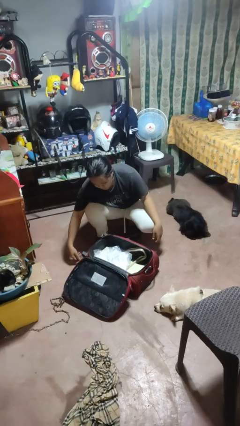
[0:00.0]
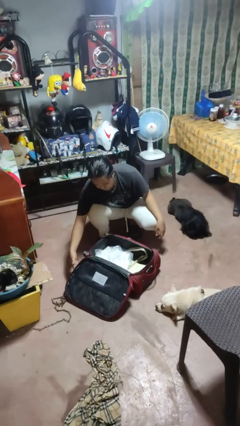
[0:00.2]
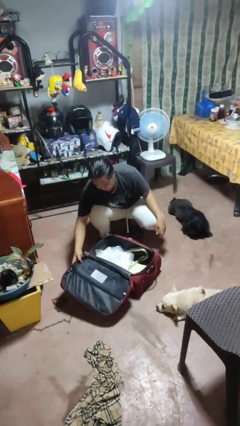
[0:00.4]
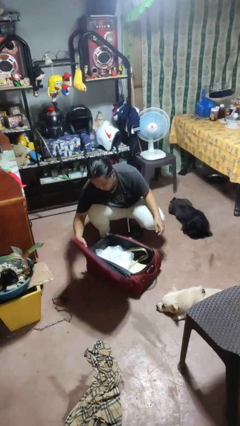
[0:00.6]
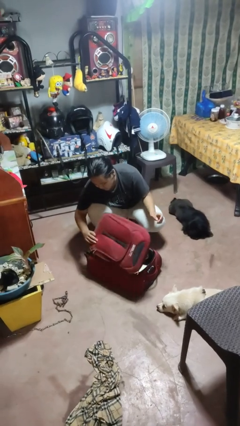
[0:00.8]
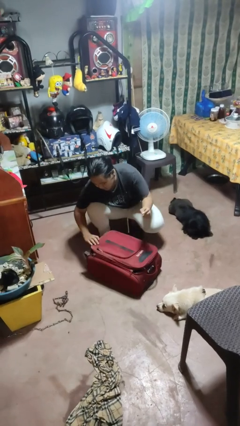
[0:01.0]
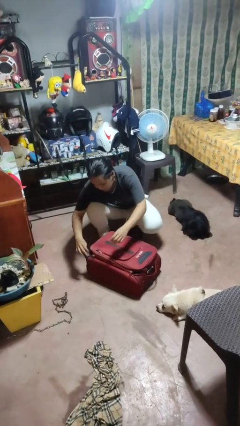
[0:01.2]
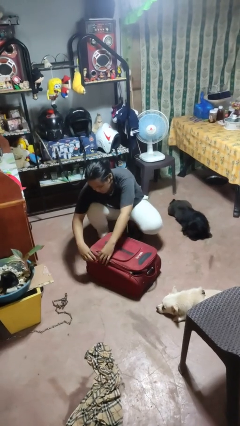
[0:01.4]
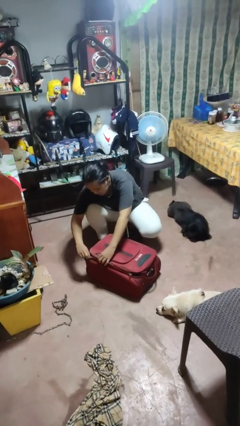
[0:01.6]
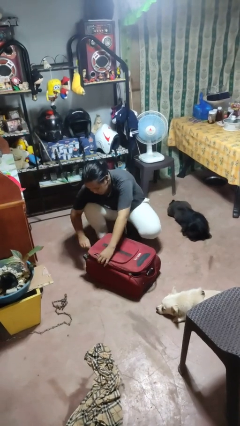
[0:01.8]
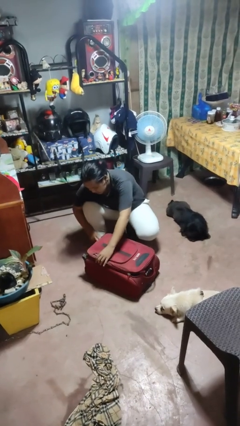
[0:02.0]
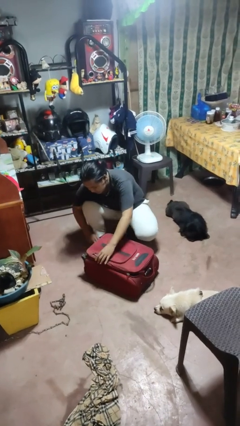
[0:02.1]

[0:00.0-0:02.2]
person closes suitcase

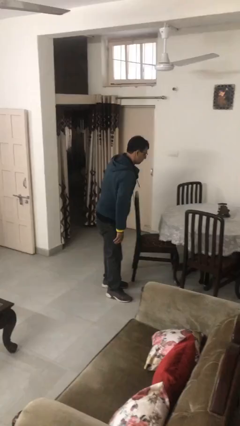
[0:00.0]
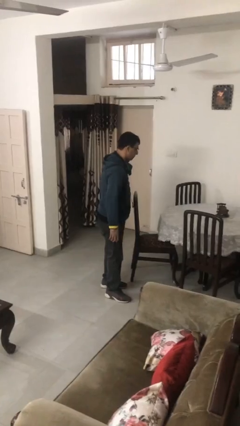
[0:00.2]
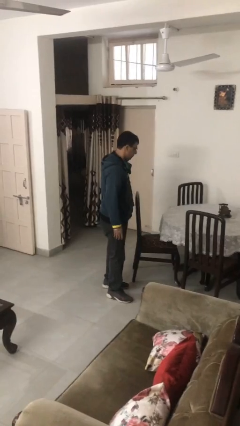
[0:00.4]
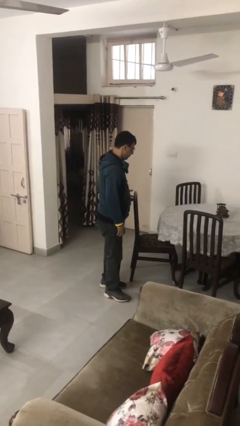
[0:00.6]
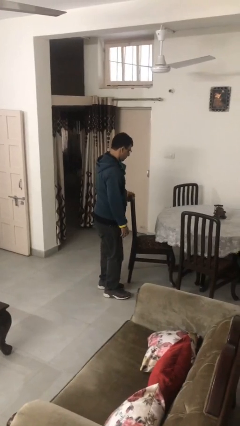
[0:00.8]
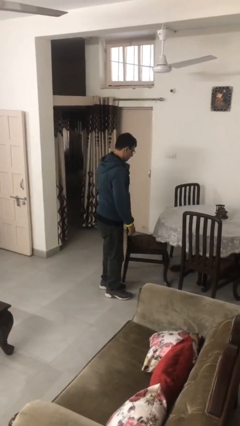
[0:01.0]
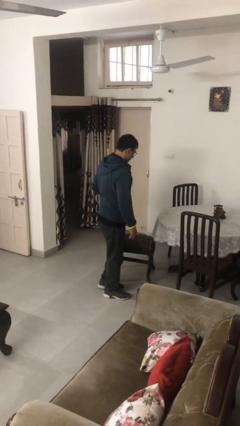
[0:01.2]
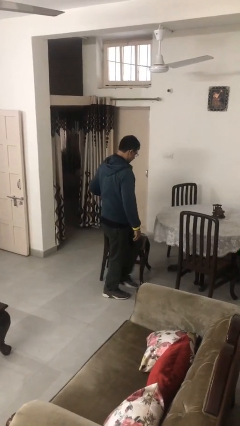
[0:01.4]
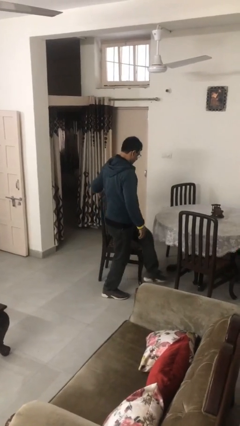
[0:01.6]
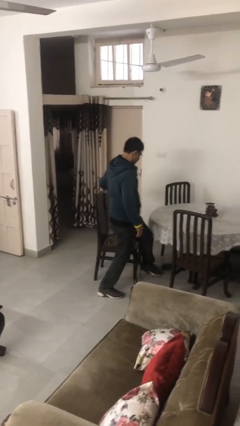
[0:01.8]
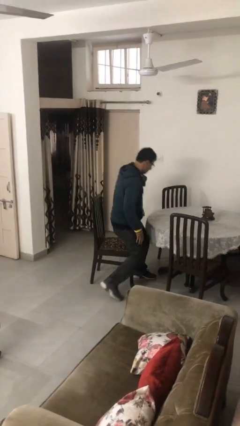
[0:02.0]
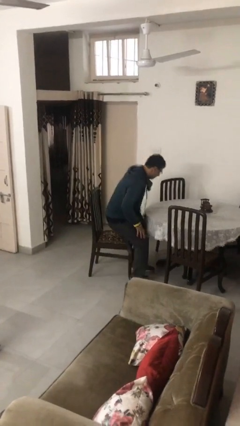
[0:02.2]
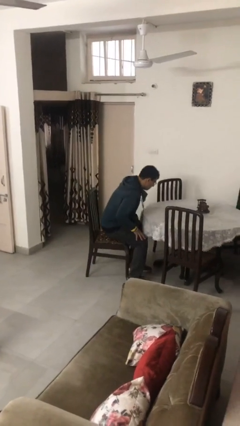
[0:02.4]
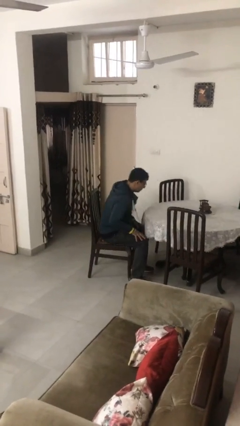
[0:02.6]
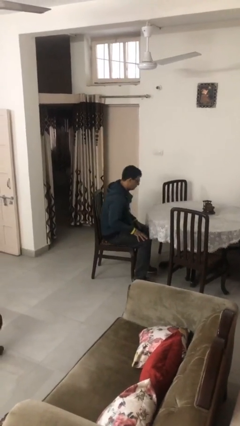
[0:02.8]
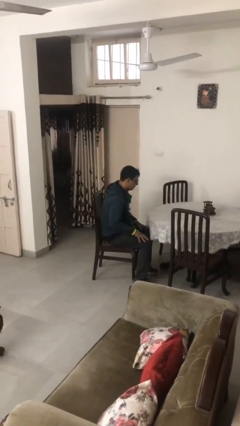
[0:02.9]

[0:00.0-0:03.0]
person sits down

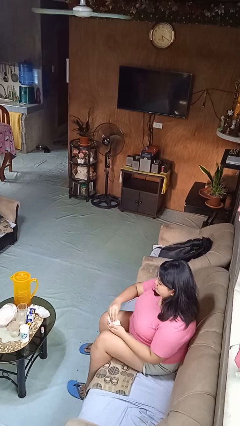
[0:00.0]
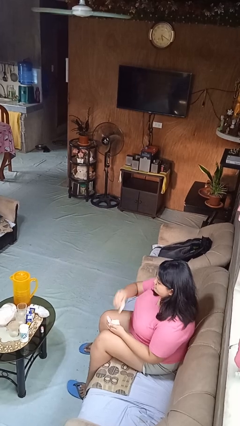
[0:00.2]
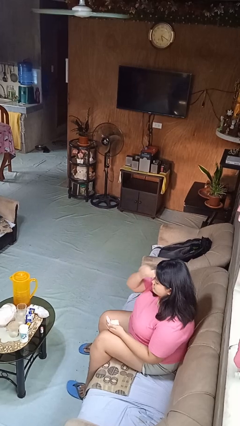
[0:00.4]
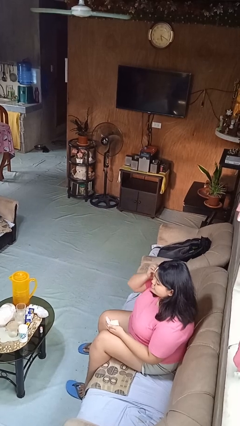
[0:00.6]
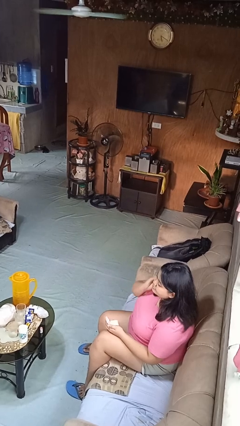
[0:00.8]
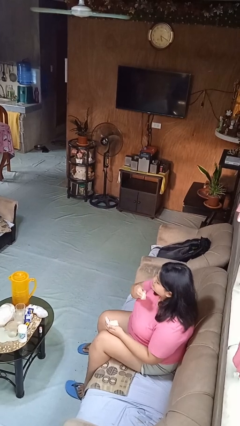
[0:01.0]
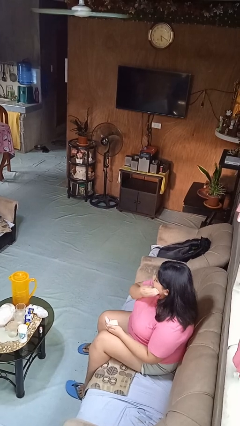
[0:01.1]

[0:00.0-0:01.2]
person applies foundation makeup

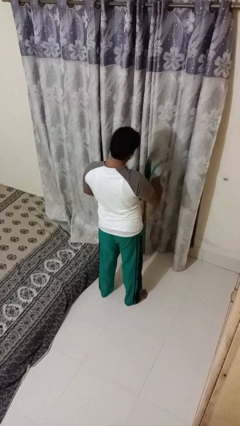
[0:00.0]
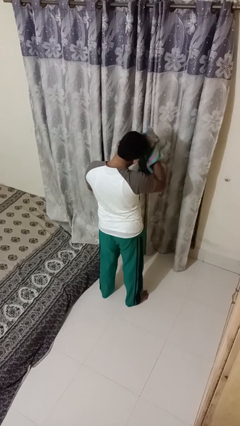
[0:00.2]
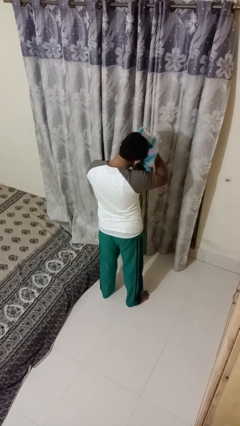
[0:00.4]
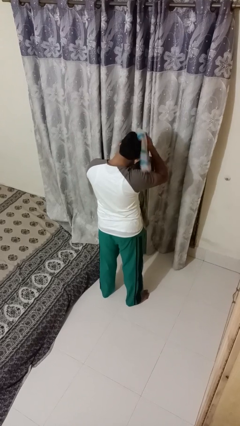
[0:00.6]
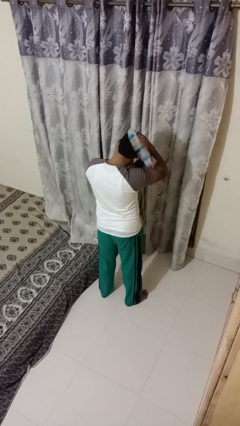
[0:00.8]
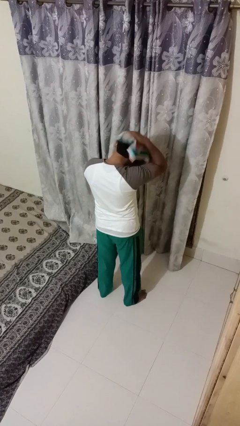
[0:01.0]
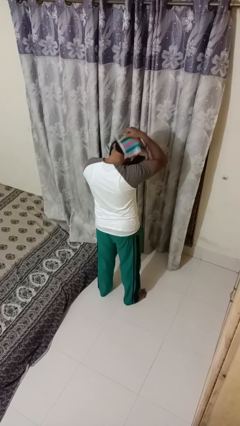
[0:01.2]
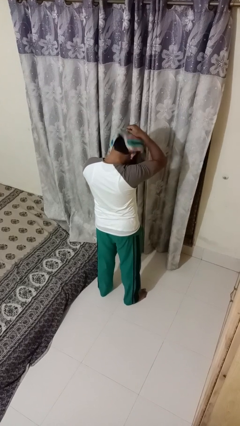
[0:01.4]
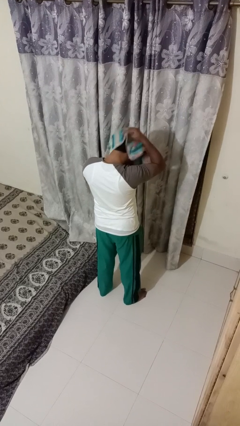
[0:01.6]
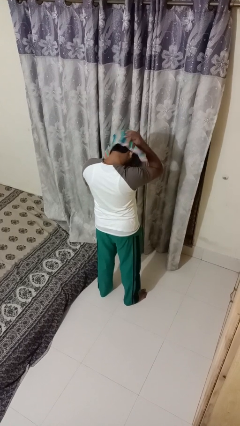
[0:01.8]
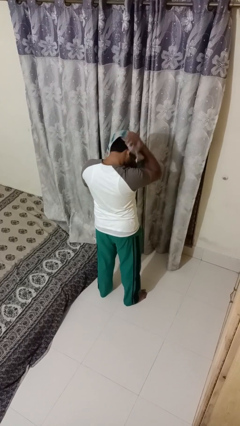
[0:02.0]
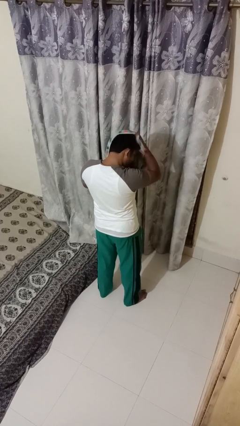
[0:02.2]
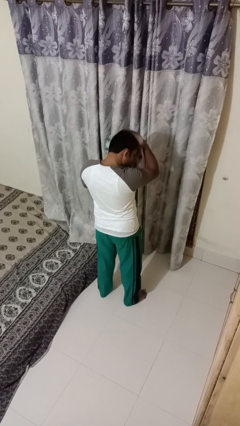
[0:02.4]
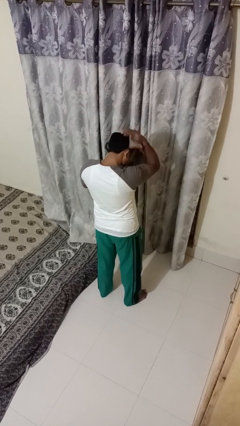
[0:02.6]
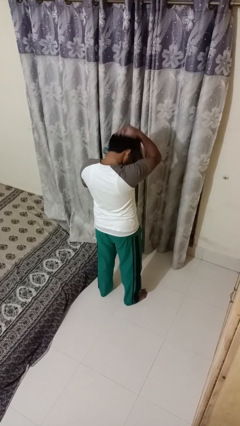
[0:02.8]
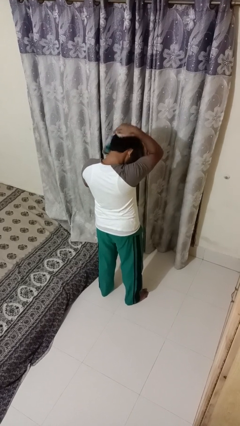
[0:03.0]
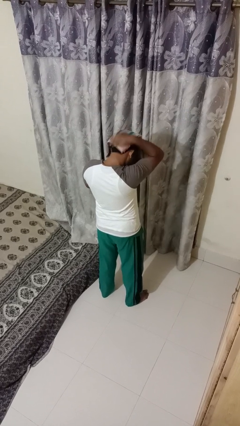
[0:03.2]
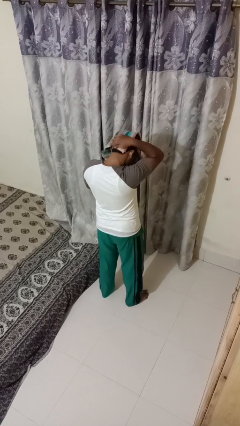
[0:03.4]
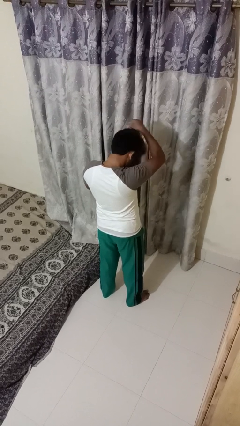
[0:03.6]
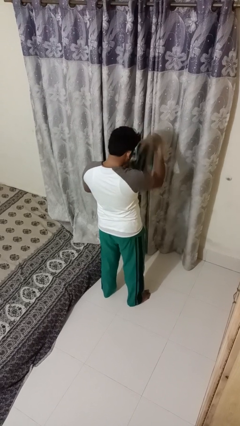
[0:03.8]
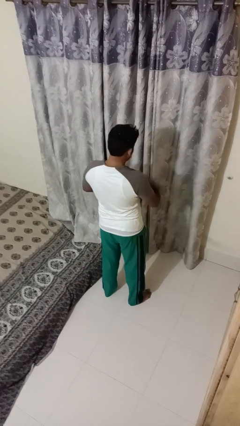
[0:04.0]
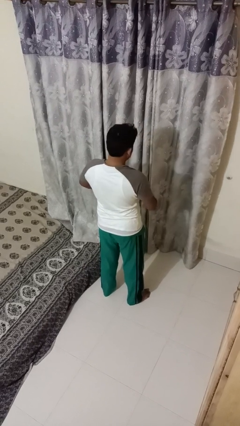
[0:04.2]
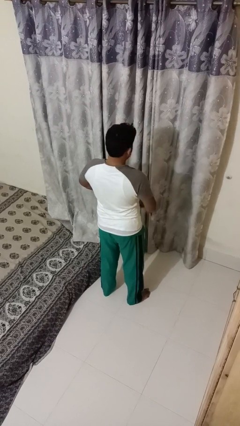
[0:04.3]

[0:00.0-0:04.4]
person dries hair with towel

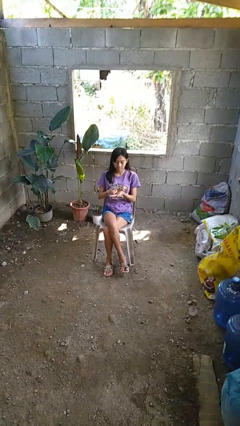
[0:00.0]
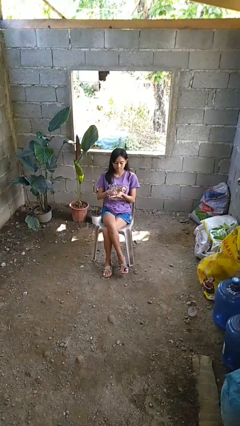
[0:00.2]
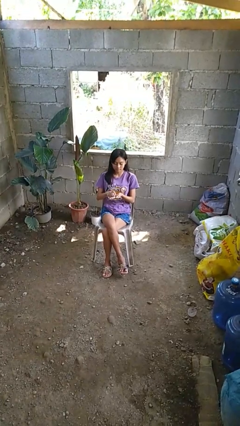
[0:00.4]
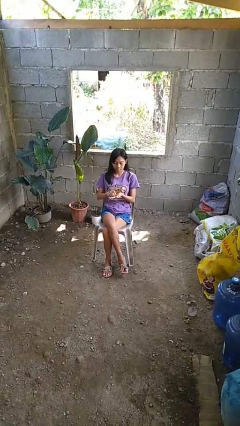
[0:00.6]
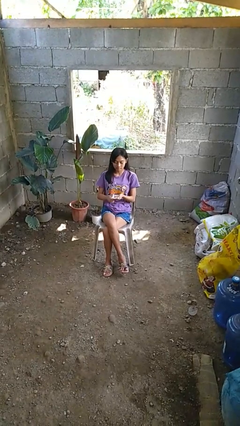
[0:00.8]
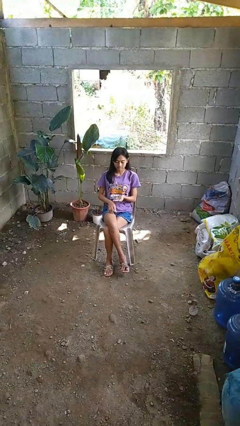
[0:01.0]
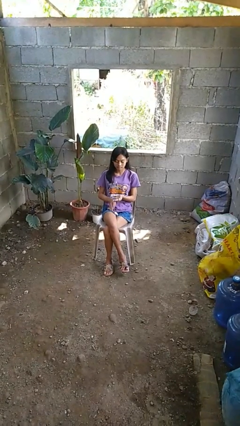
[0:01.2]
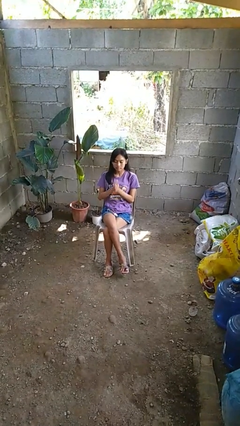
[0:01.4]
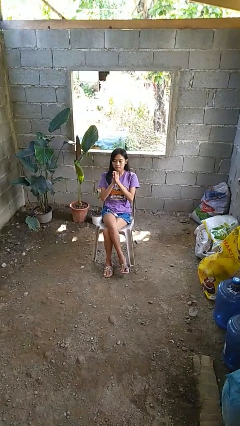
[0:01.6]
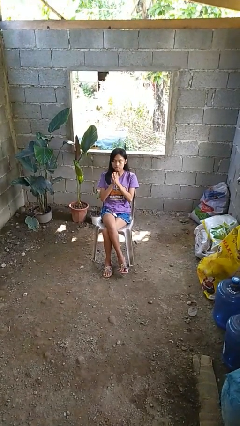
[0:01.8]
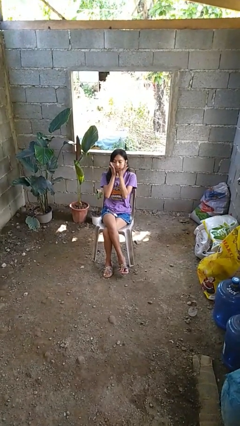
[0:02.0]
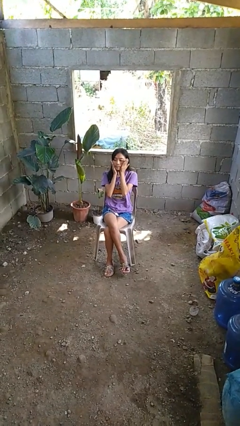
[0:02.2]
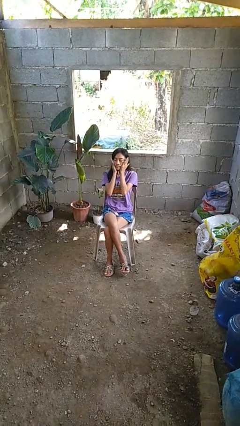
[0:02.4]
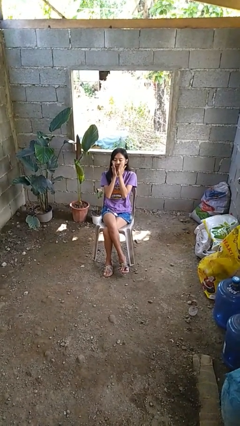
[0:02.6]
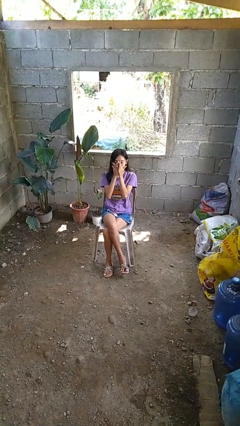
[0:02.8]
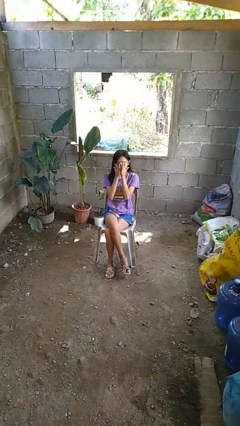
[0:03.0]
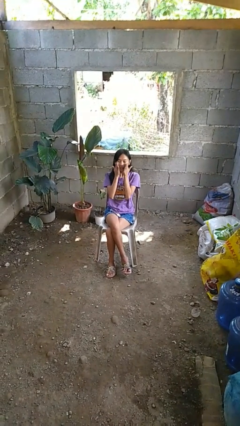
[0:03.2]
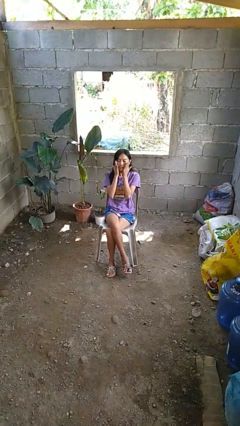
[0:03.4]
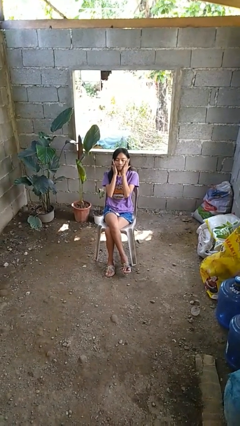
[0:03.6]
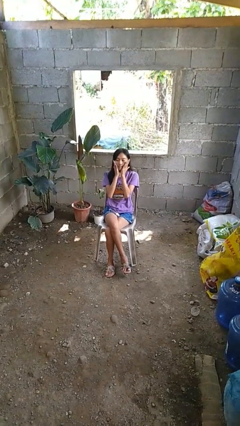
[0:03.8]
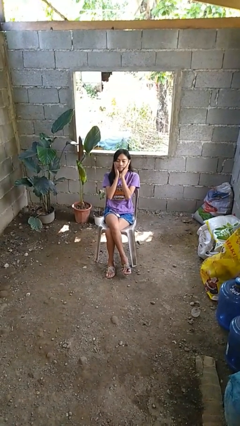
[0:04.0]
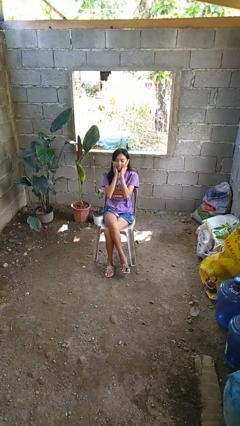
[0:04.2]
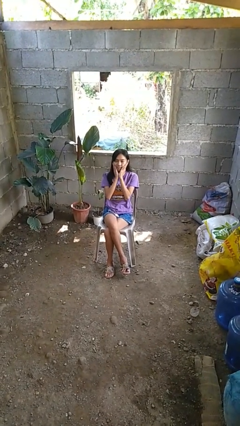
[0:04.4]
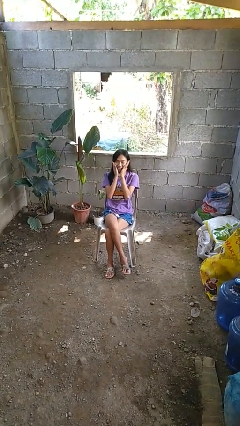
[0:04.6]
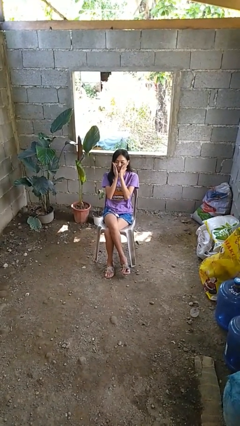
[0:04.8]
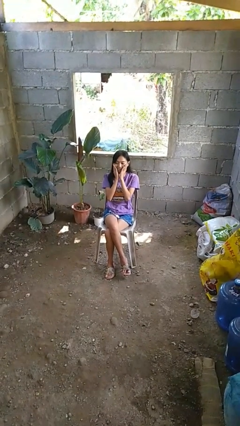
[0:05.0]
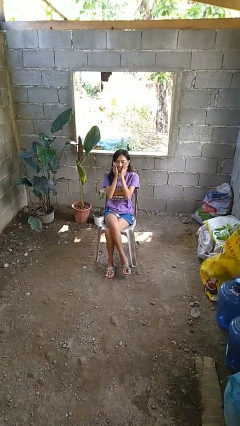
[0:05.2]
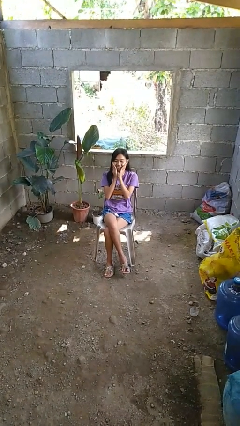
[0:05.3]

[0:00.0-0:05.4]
person applies facial moisturizer

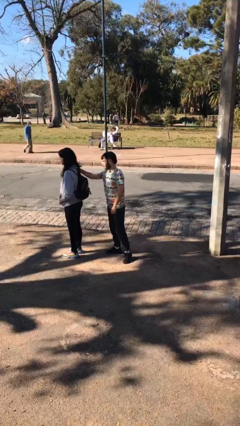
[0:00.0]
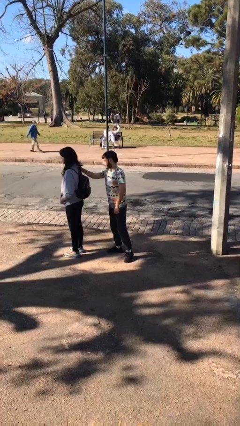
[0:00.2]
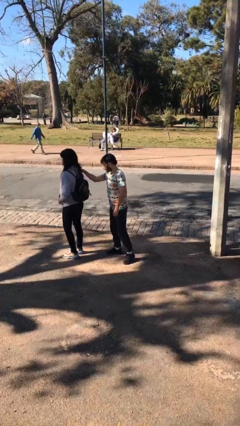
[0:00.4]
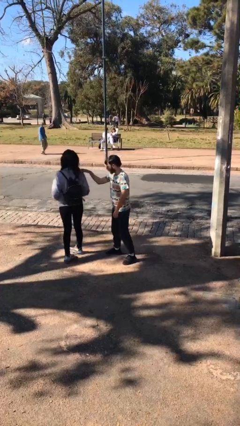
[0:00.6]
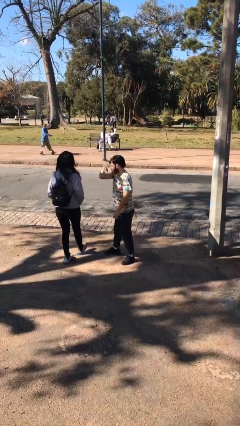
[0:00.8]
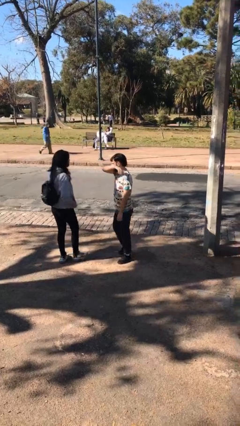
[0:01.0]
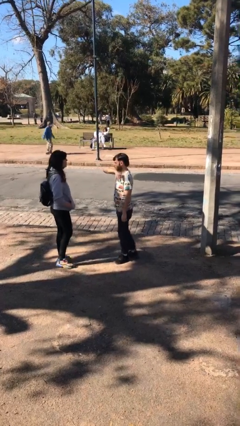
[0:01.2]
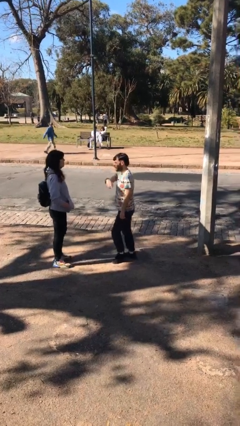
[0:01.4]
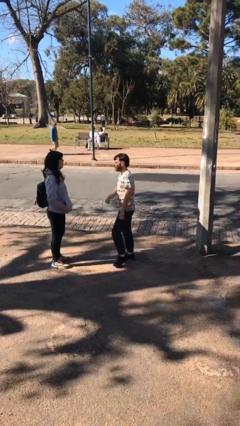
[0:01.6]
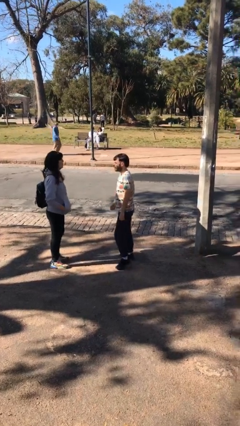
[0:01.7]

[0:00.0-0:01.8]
person spins person around
